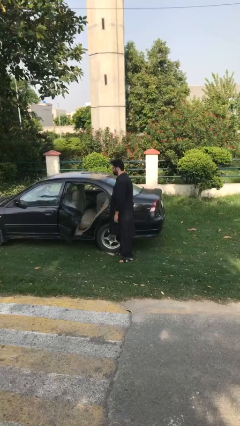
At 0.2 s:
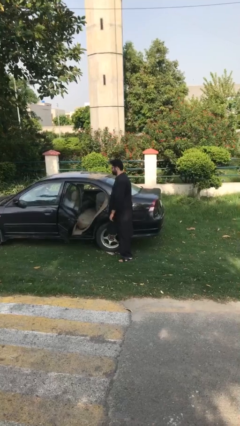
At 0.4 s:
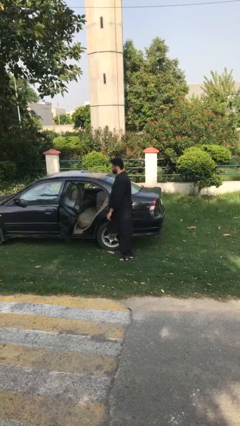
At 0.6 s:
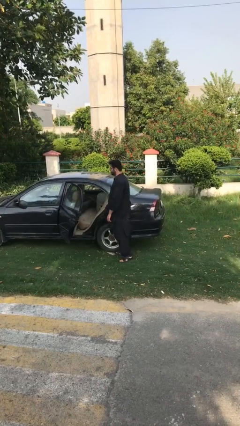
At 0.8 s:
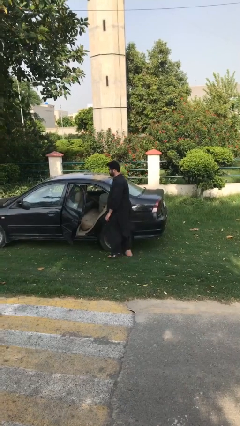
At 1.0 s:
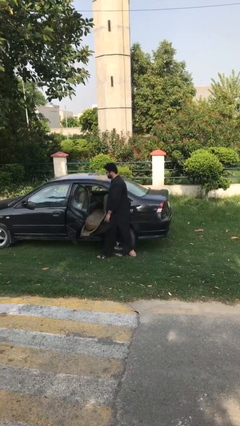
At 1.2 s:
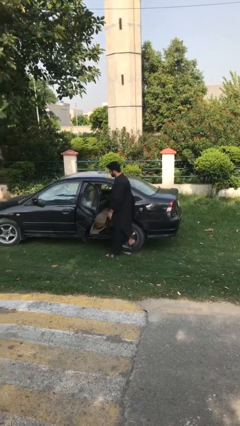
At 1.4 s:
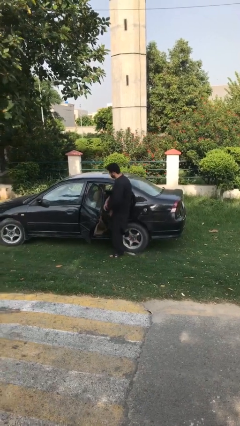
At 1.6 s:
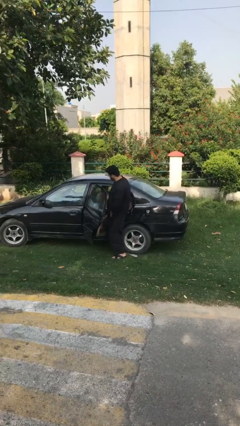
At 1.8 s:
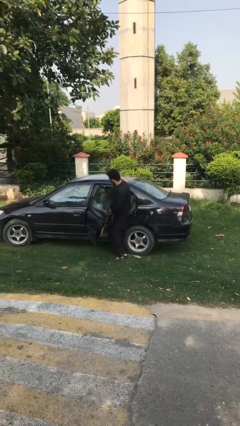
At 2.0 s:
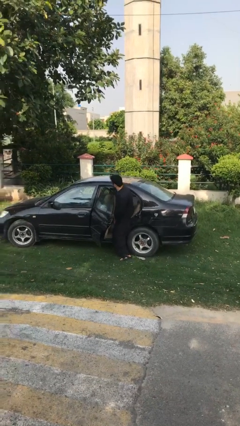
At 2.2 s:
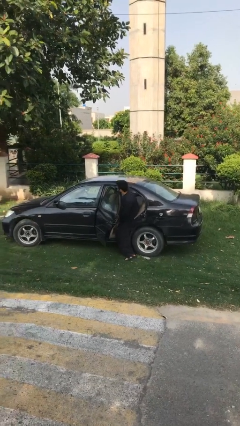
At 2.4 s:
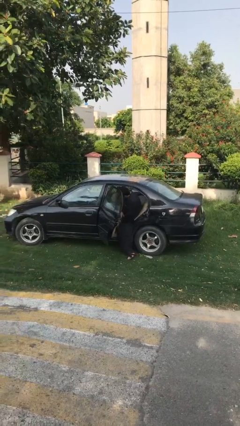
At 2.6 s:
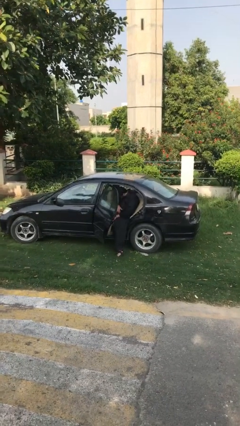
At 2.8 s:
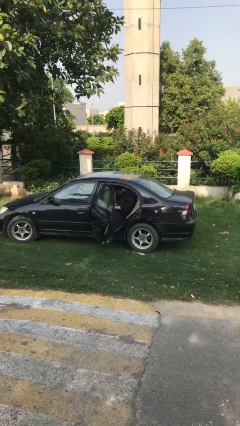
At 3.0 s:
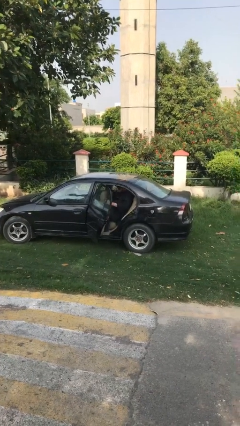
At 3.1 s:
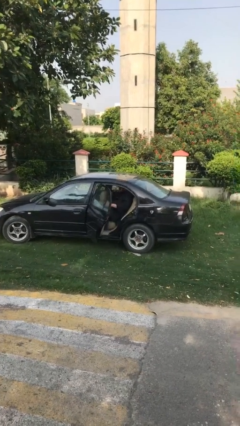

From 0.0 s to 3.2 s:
person enters car

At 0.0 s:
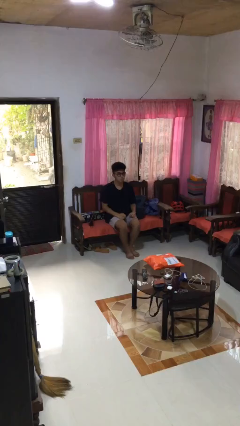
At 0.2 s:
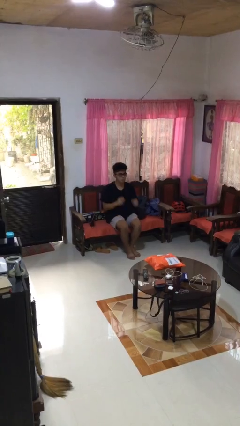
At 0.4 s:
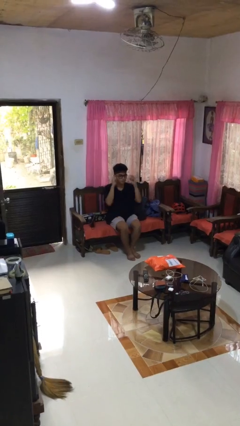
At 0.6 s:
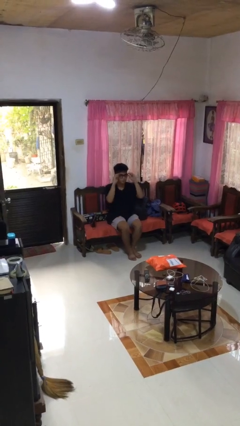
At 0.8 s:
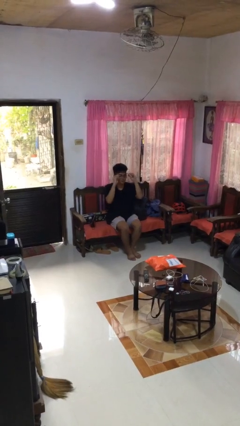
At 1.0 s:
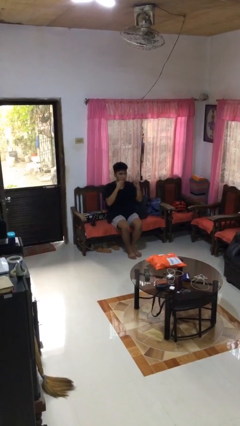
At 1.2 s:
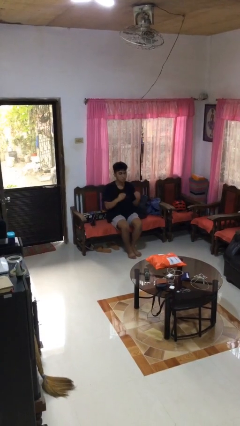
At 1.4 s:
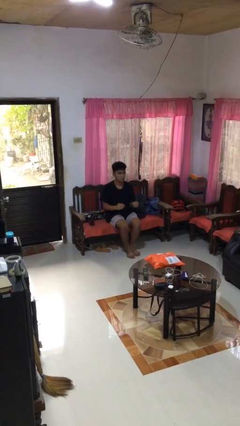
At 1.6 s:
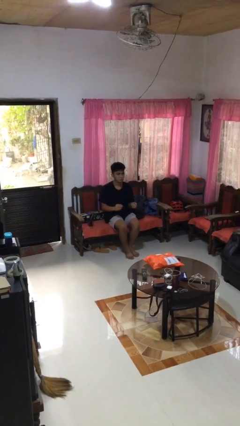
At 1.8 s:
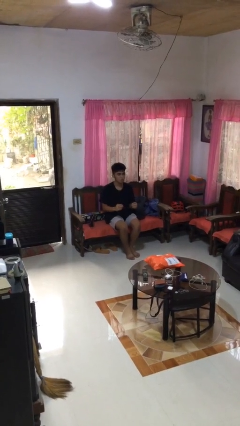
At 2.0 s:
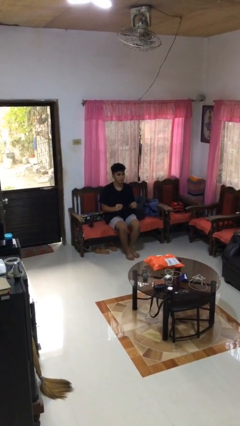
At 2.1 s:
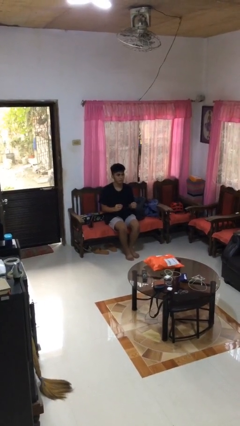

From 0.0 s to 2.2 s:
person takes off glasses

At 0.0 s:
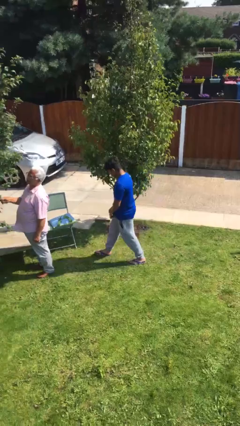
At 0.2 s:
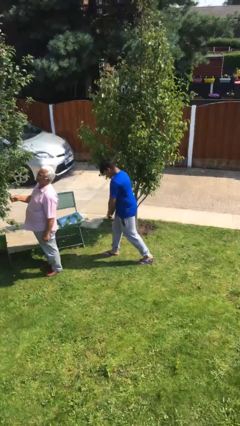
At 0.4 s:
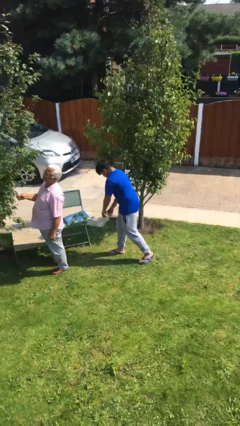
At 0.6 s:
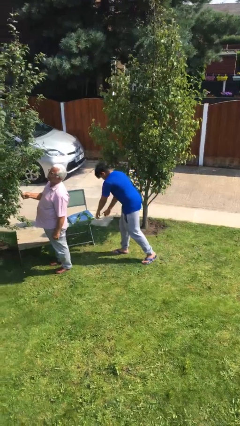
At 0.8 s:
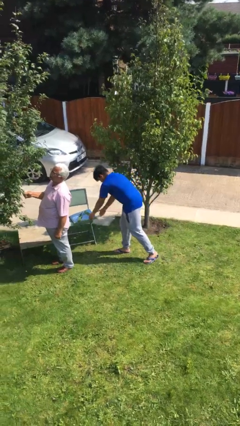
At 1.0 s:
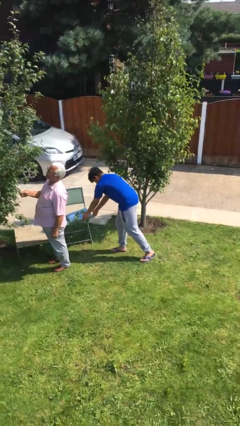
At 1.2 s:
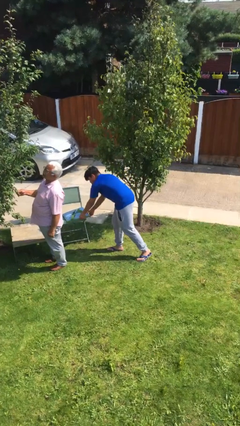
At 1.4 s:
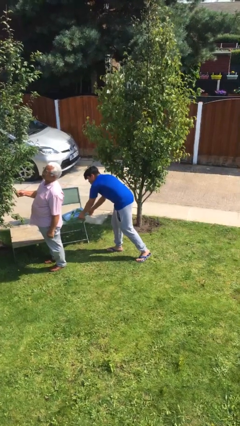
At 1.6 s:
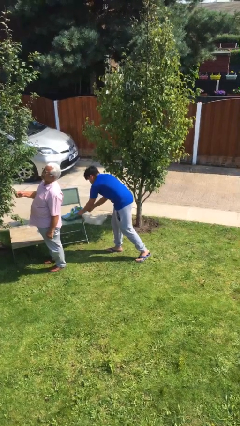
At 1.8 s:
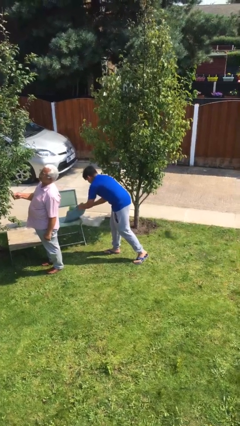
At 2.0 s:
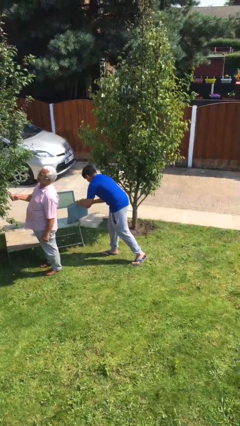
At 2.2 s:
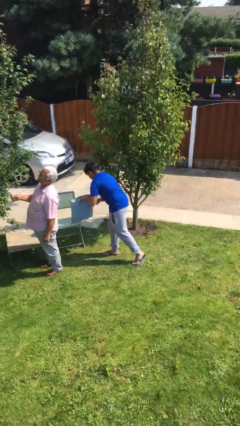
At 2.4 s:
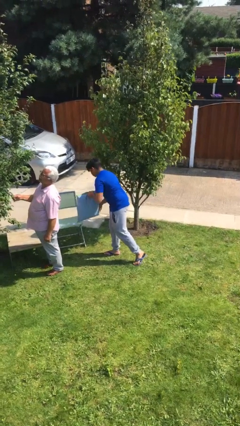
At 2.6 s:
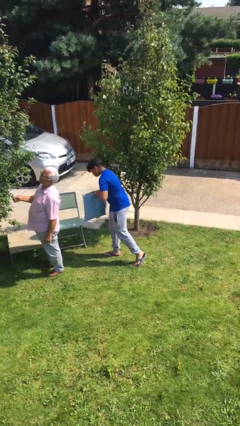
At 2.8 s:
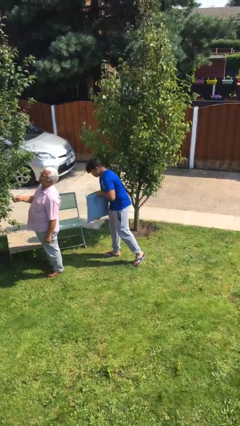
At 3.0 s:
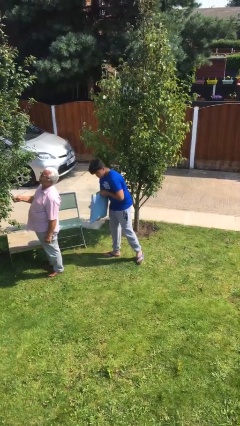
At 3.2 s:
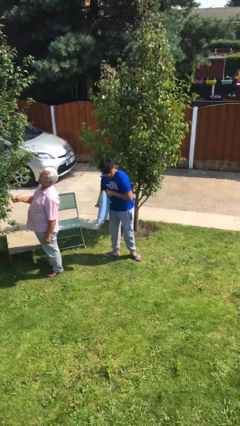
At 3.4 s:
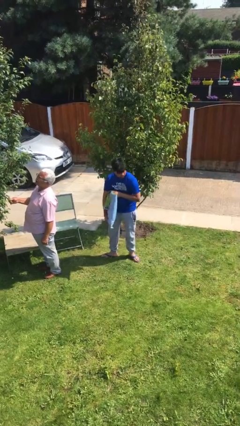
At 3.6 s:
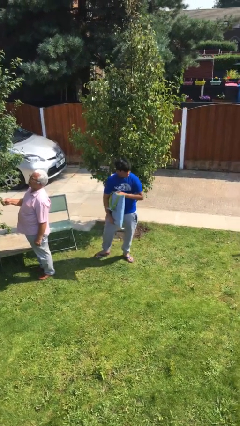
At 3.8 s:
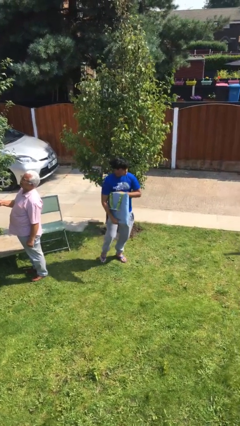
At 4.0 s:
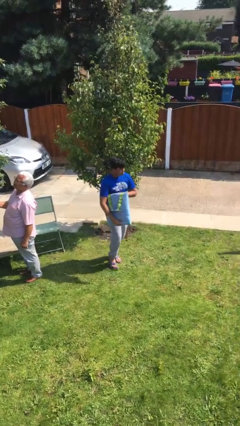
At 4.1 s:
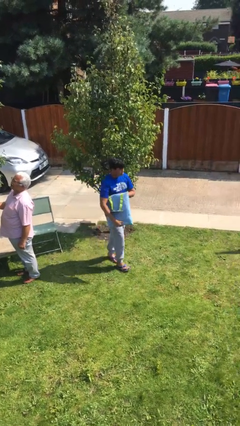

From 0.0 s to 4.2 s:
person steals object from person

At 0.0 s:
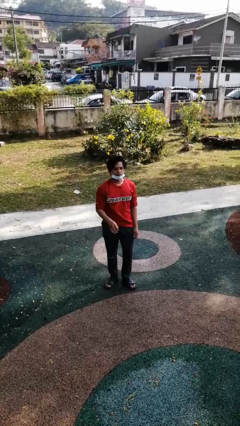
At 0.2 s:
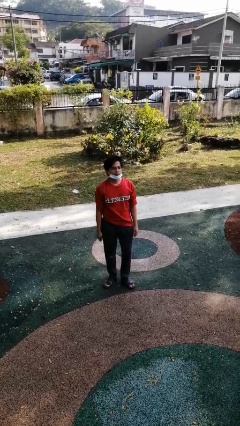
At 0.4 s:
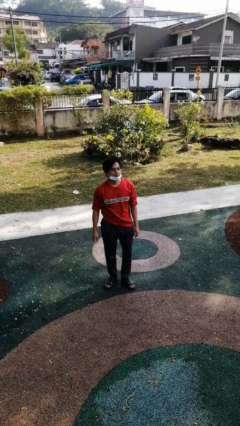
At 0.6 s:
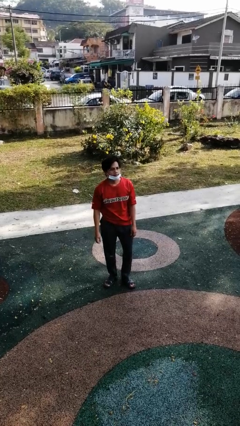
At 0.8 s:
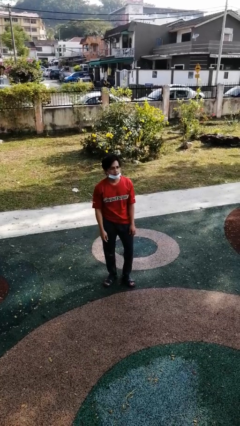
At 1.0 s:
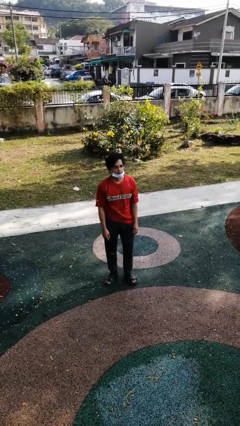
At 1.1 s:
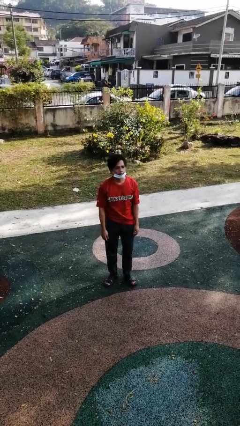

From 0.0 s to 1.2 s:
person gestures lower hand

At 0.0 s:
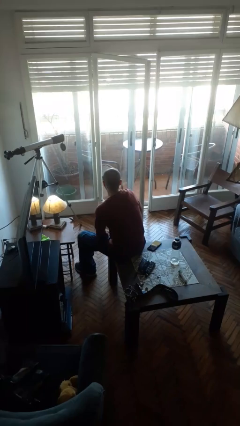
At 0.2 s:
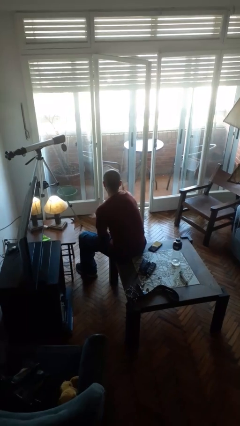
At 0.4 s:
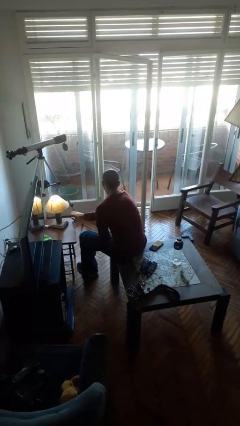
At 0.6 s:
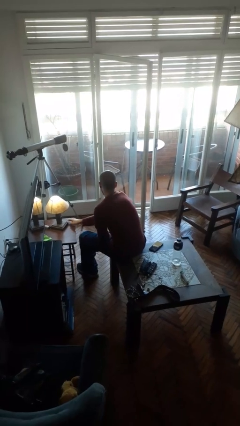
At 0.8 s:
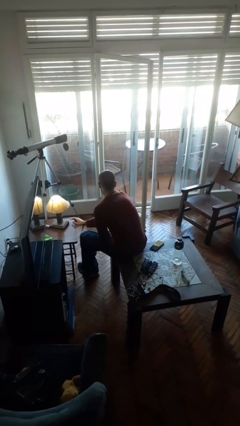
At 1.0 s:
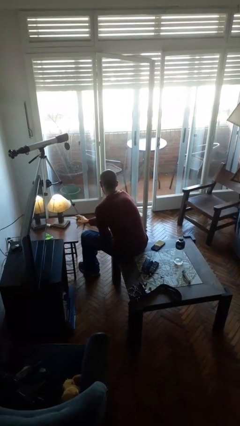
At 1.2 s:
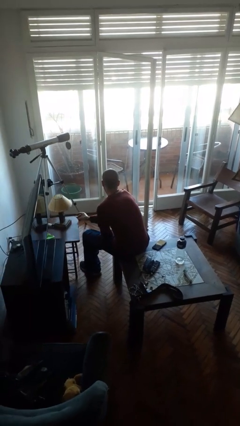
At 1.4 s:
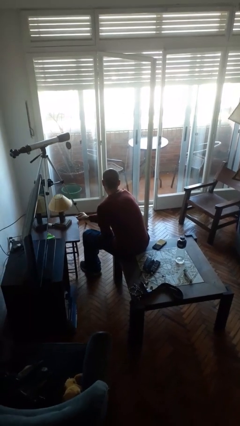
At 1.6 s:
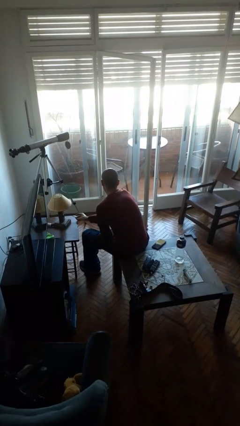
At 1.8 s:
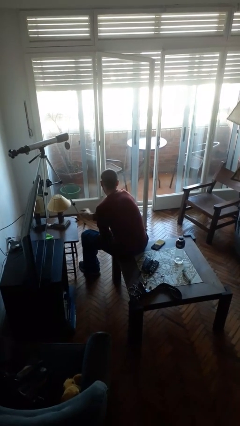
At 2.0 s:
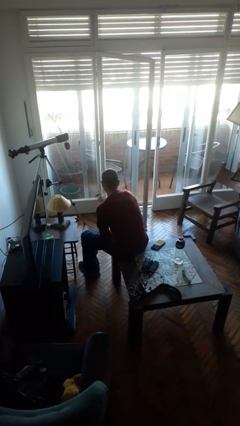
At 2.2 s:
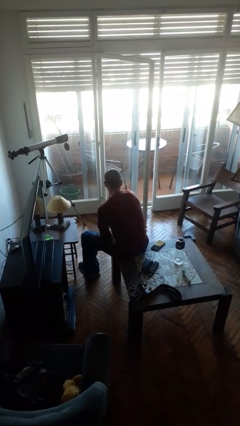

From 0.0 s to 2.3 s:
person turns off lamp

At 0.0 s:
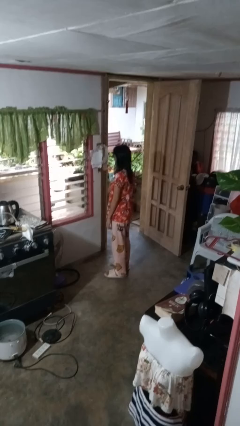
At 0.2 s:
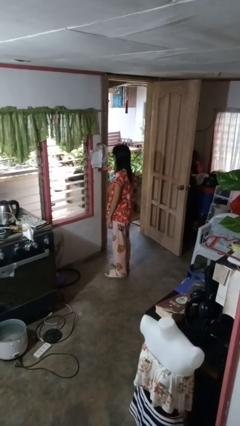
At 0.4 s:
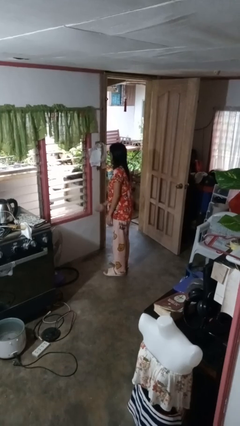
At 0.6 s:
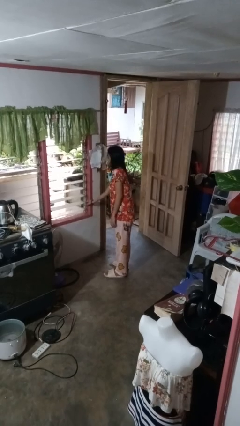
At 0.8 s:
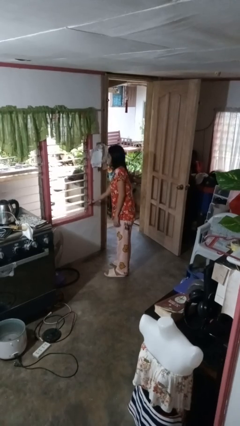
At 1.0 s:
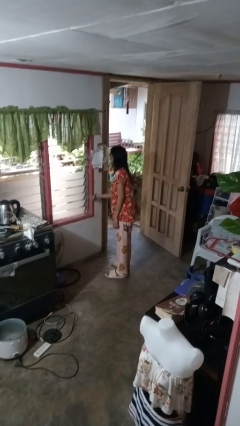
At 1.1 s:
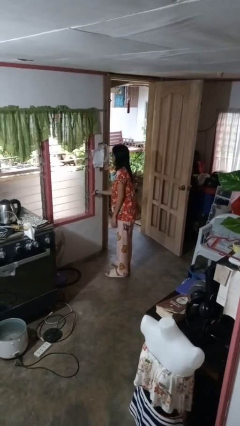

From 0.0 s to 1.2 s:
person closes home window

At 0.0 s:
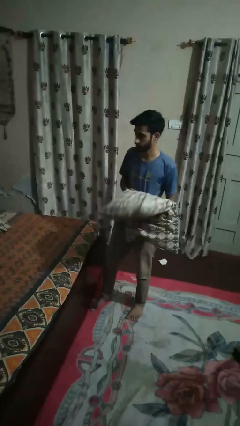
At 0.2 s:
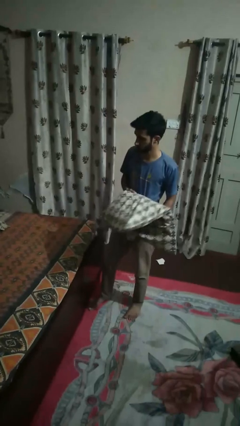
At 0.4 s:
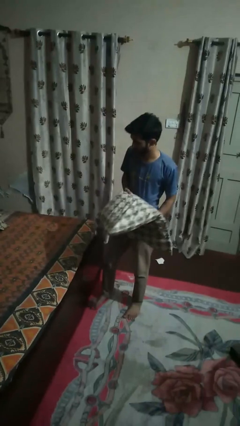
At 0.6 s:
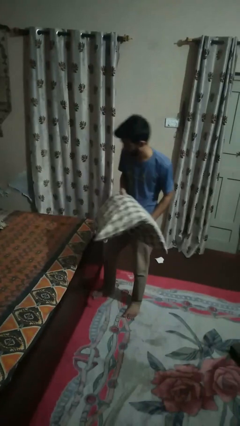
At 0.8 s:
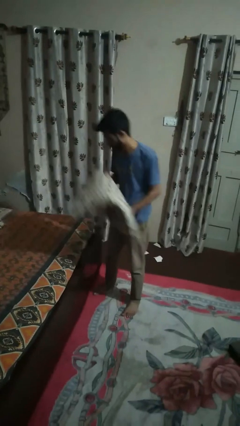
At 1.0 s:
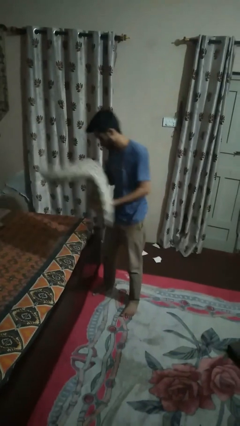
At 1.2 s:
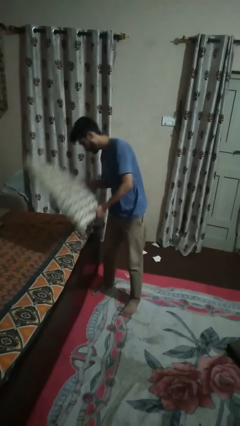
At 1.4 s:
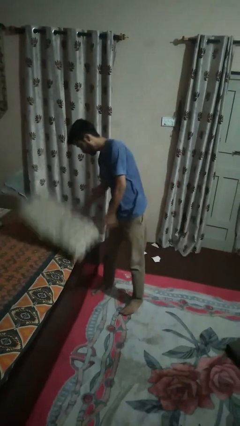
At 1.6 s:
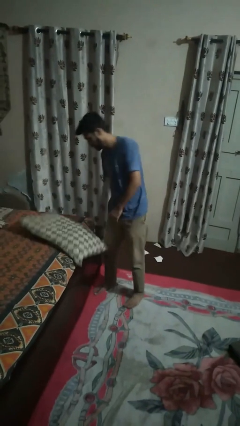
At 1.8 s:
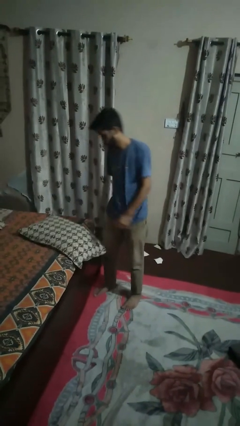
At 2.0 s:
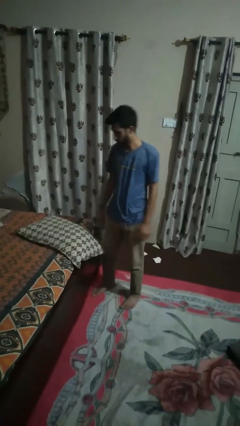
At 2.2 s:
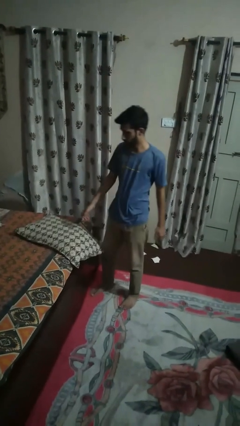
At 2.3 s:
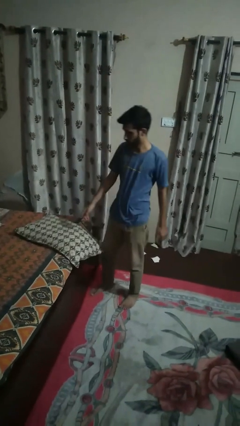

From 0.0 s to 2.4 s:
person puts down object on bed

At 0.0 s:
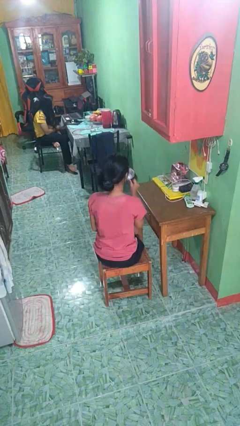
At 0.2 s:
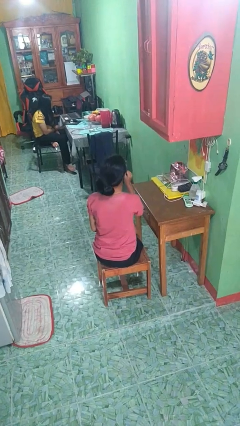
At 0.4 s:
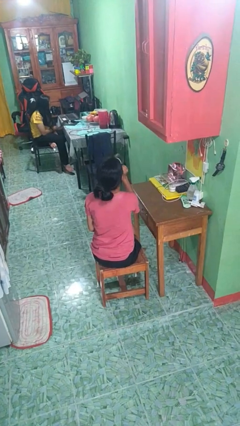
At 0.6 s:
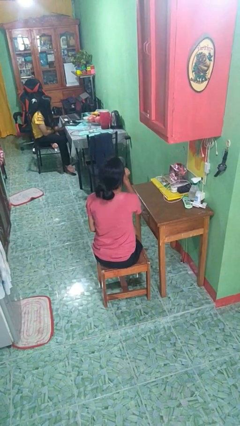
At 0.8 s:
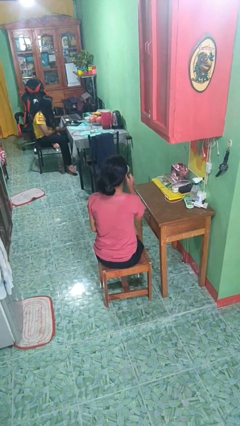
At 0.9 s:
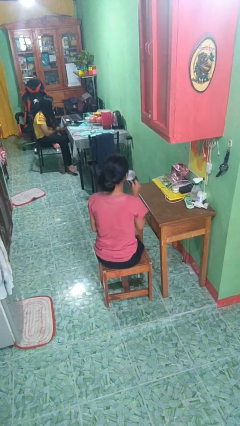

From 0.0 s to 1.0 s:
person drinks from mug
